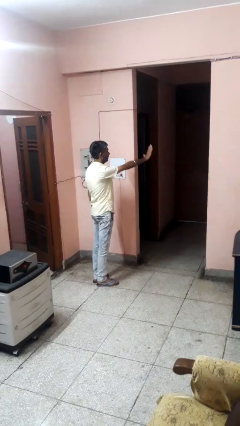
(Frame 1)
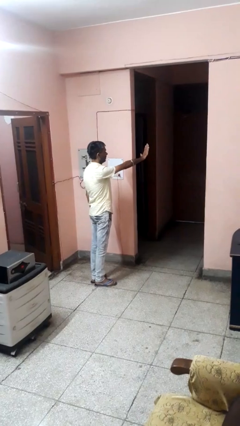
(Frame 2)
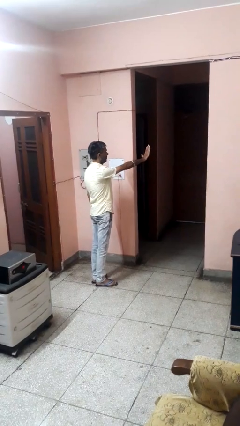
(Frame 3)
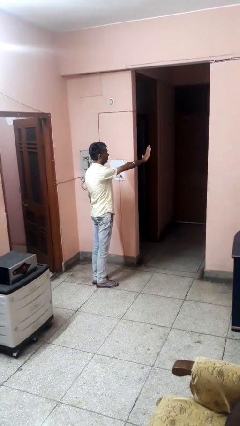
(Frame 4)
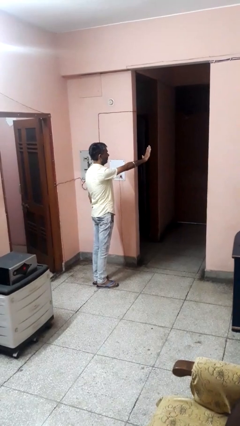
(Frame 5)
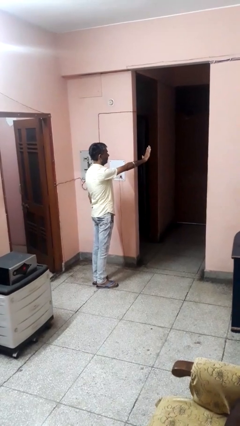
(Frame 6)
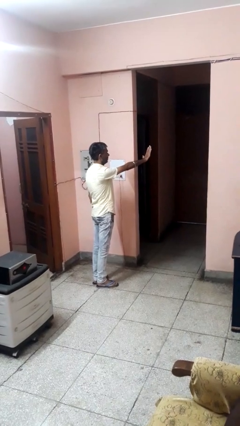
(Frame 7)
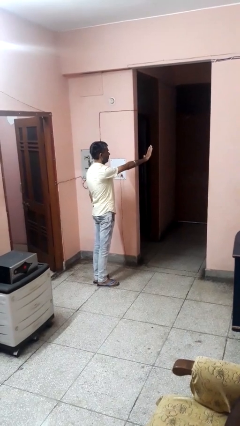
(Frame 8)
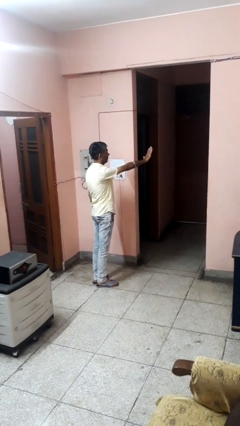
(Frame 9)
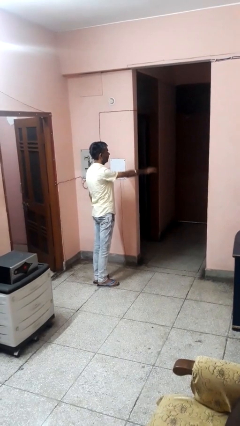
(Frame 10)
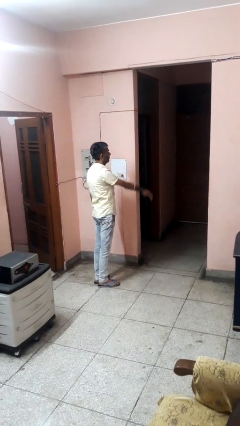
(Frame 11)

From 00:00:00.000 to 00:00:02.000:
person gestures stop

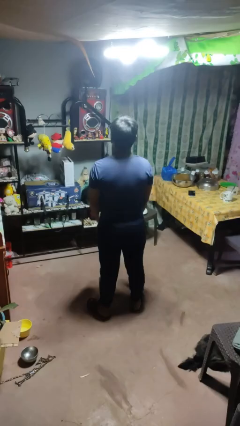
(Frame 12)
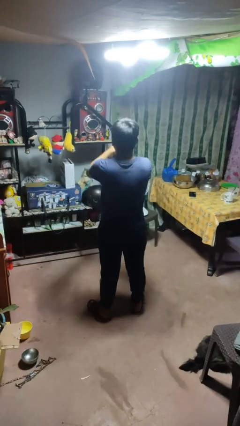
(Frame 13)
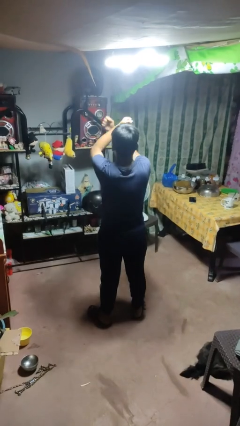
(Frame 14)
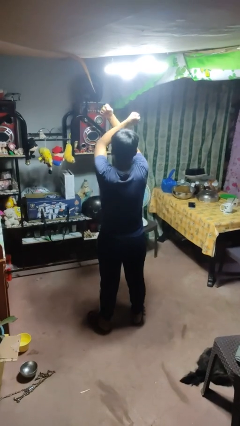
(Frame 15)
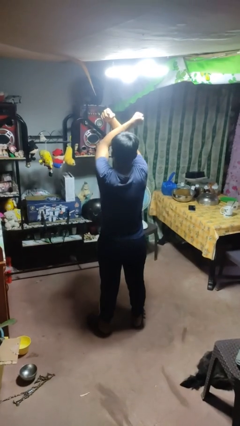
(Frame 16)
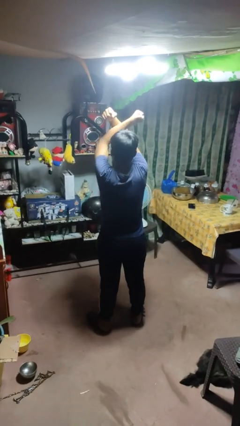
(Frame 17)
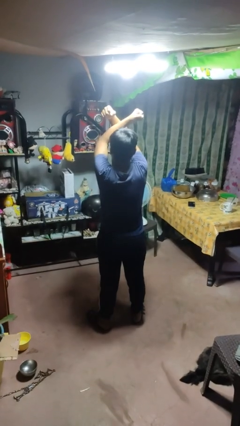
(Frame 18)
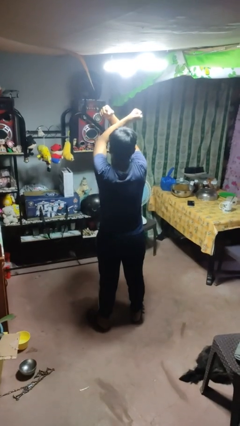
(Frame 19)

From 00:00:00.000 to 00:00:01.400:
person gestures arms x

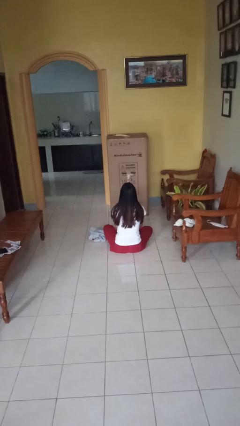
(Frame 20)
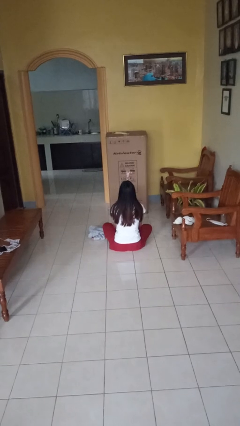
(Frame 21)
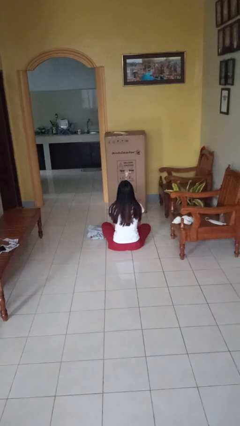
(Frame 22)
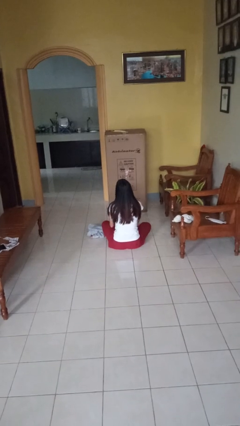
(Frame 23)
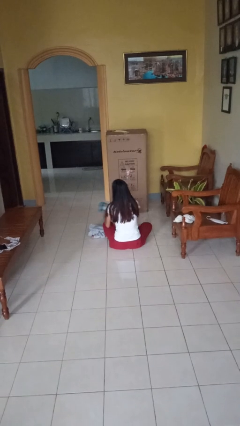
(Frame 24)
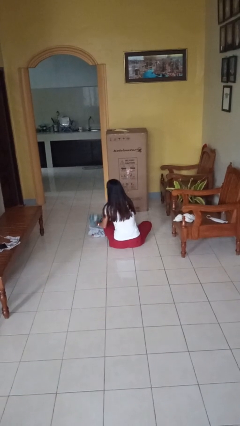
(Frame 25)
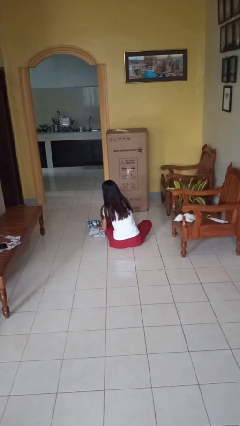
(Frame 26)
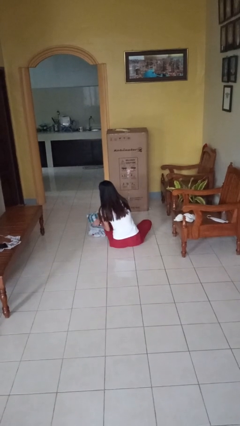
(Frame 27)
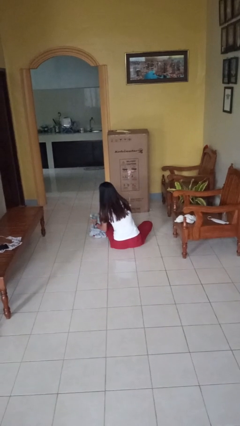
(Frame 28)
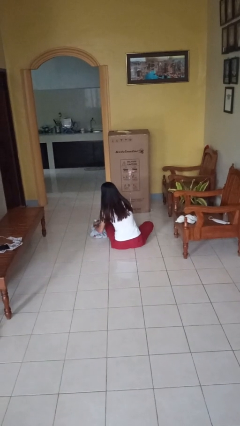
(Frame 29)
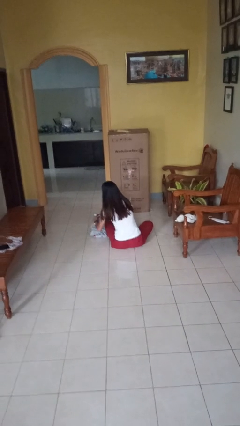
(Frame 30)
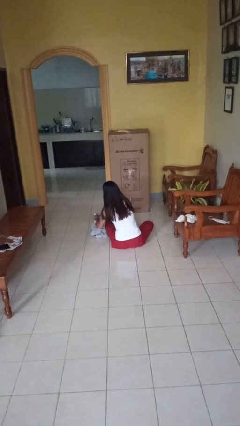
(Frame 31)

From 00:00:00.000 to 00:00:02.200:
person folds towel

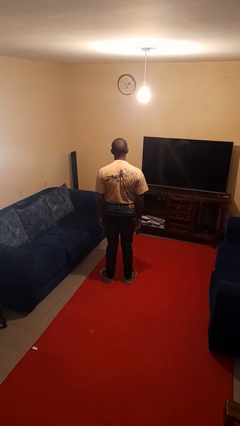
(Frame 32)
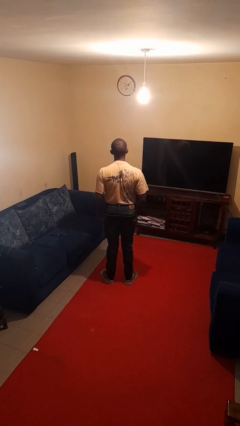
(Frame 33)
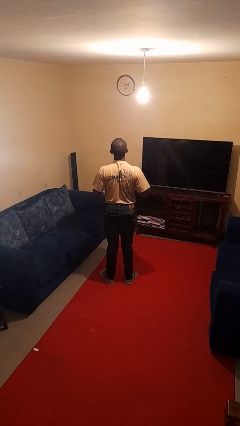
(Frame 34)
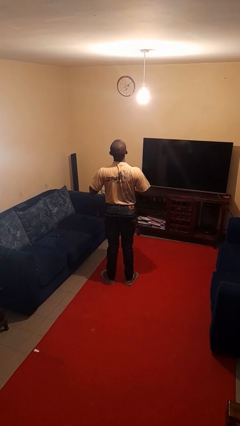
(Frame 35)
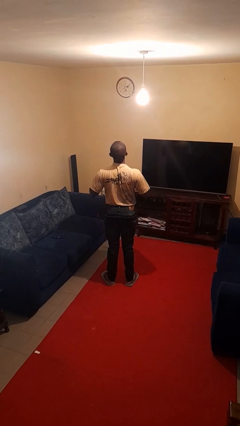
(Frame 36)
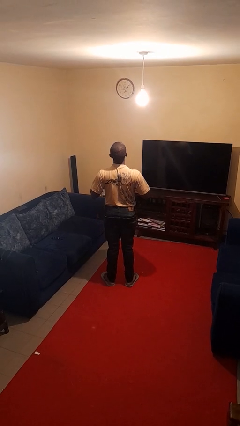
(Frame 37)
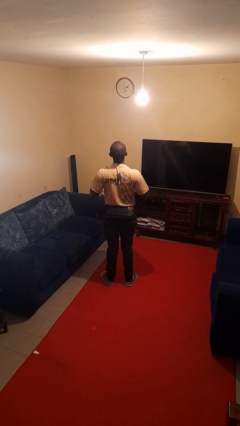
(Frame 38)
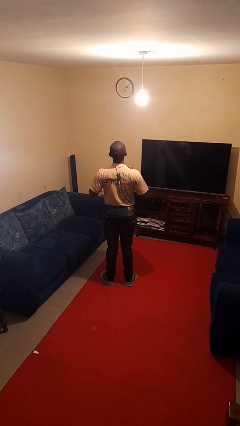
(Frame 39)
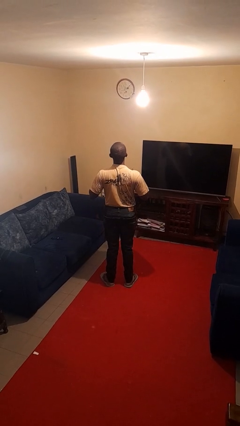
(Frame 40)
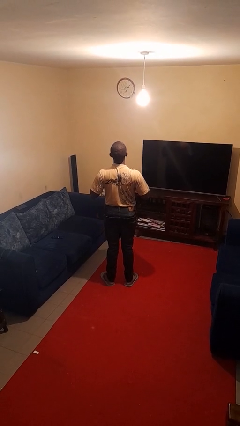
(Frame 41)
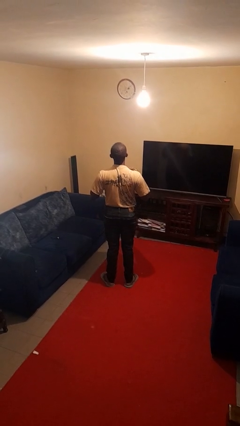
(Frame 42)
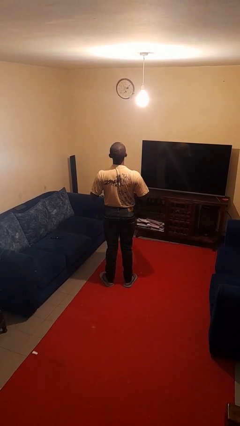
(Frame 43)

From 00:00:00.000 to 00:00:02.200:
person drums on chest

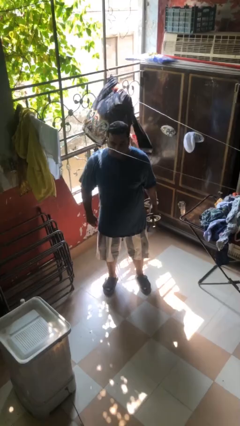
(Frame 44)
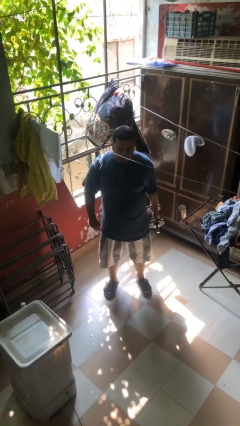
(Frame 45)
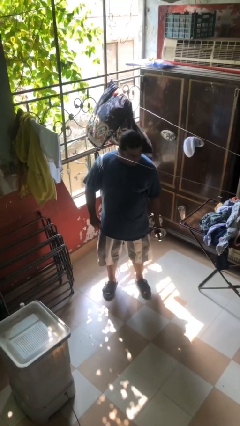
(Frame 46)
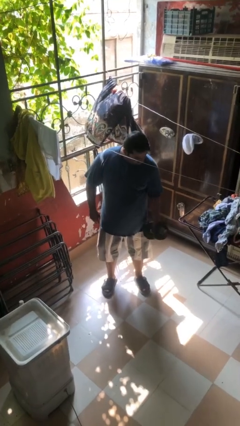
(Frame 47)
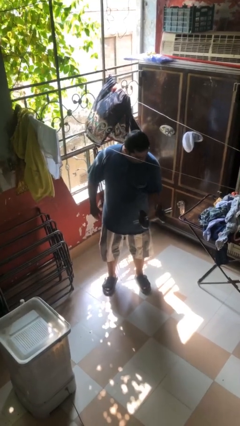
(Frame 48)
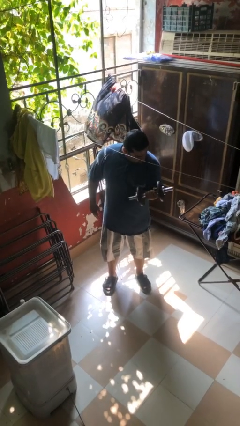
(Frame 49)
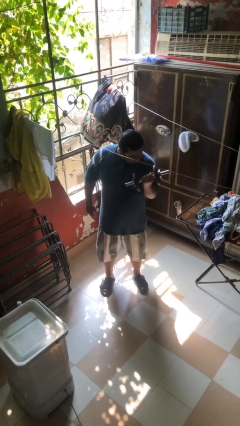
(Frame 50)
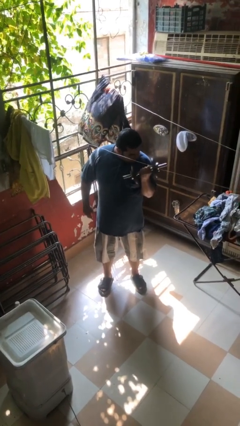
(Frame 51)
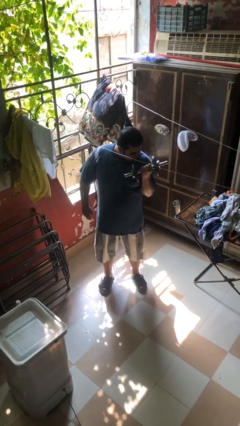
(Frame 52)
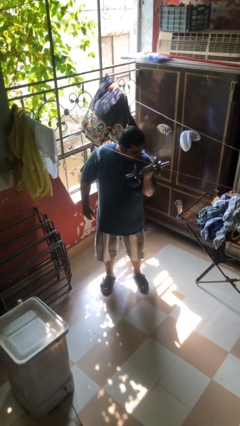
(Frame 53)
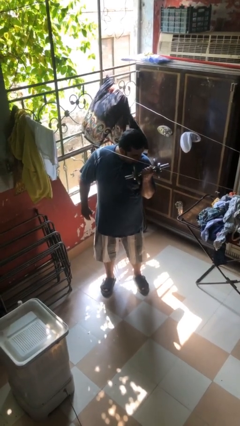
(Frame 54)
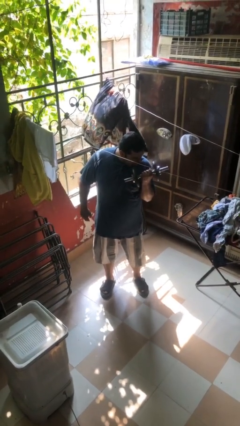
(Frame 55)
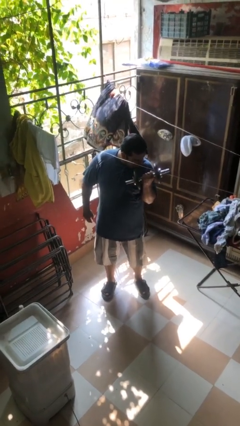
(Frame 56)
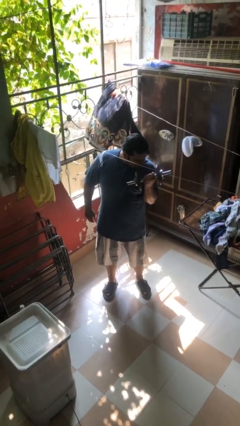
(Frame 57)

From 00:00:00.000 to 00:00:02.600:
person lifts dumbbells

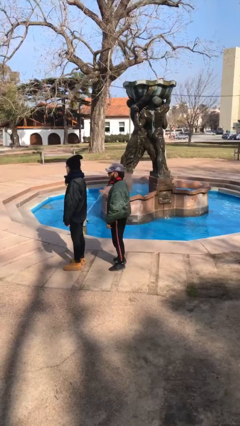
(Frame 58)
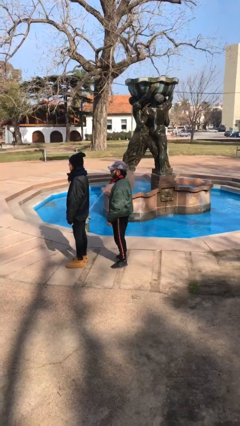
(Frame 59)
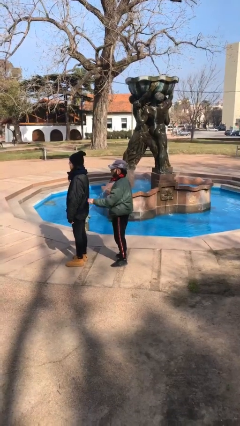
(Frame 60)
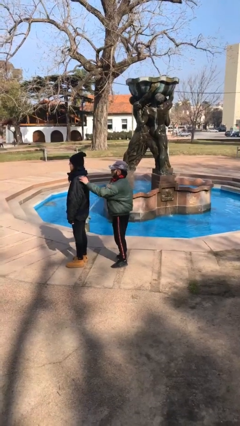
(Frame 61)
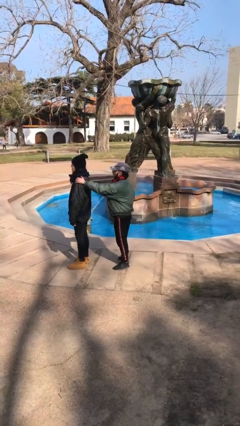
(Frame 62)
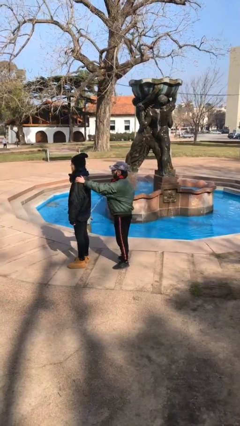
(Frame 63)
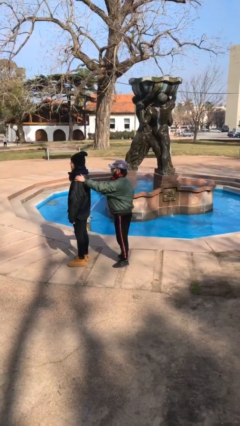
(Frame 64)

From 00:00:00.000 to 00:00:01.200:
person grabs person by shoulder

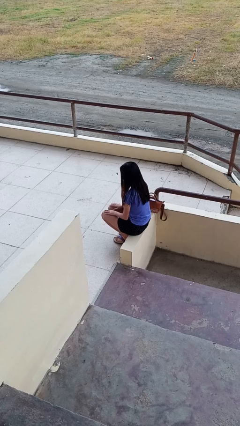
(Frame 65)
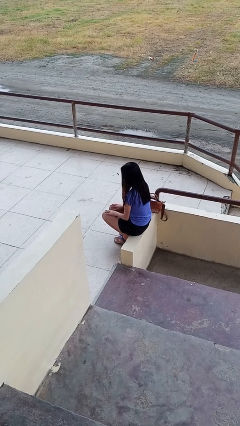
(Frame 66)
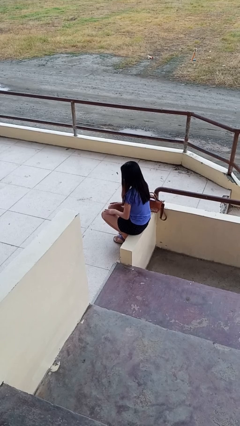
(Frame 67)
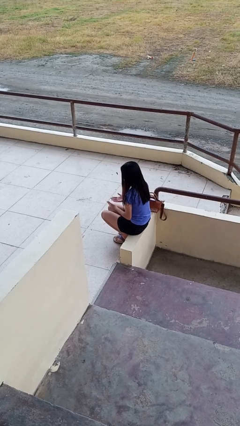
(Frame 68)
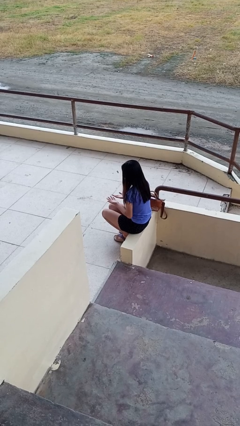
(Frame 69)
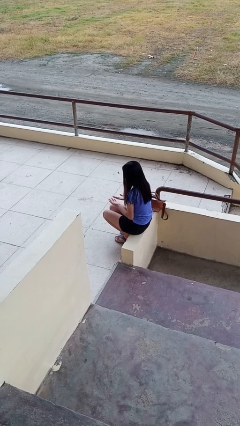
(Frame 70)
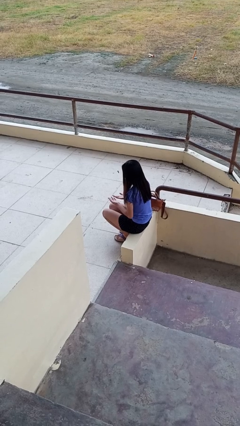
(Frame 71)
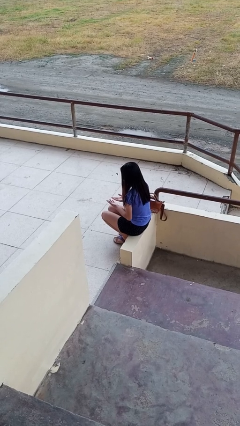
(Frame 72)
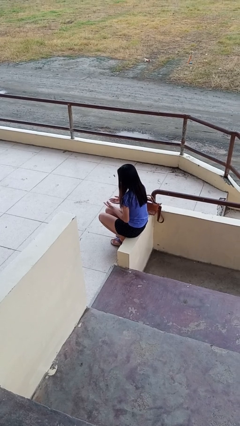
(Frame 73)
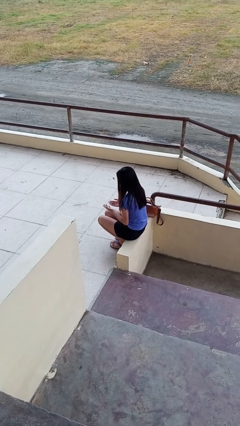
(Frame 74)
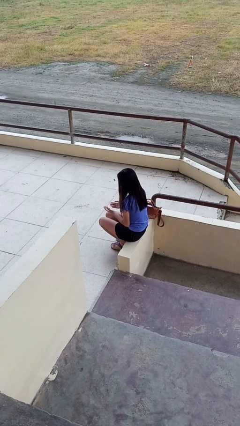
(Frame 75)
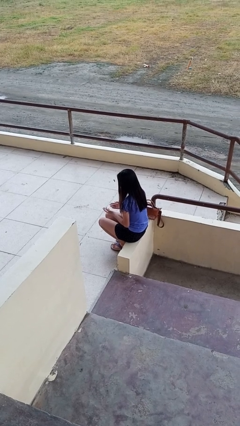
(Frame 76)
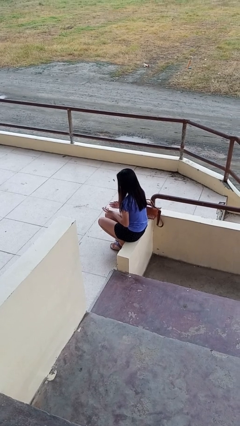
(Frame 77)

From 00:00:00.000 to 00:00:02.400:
person looks at hands in lap

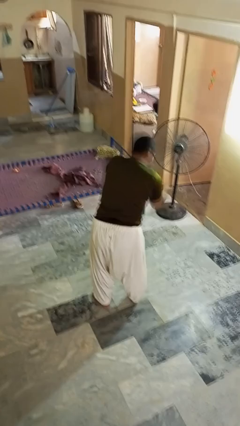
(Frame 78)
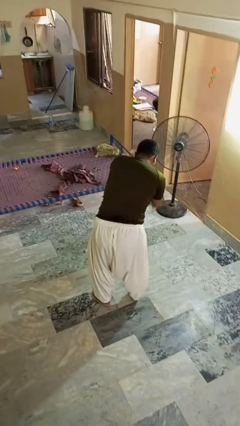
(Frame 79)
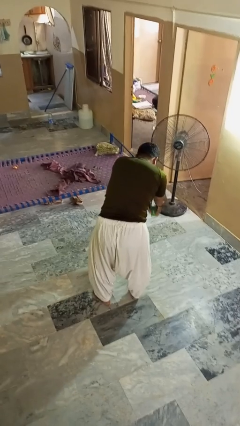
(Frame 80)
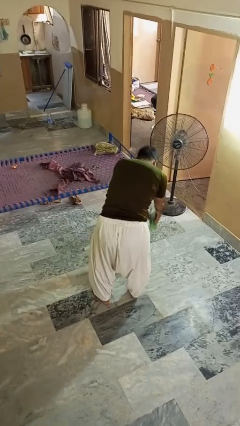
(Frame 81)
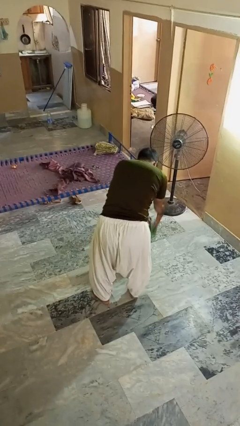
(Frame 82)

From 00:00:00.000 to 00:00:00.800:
person catches dropped object

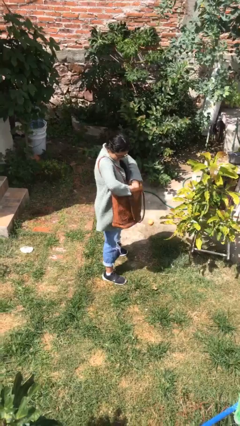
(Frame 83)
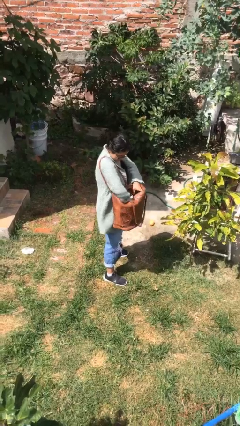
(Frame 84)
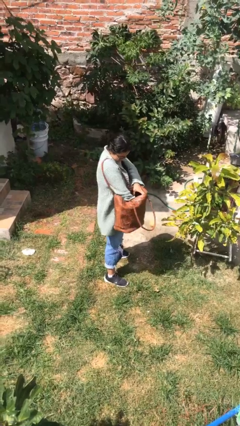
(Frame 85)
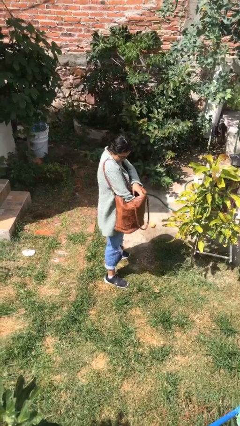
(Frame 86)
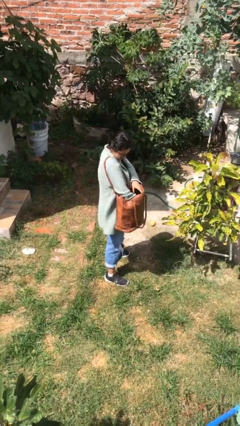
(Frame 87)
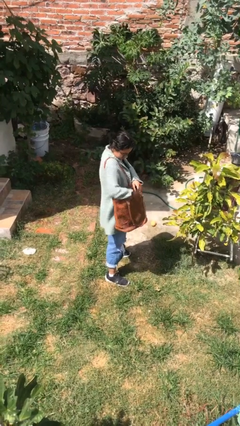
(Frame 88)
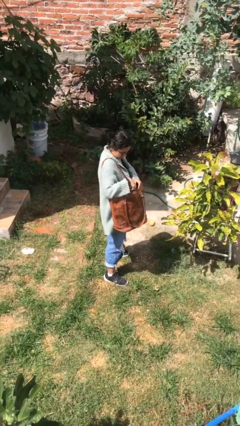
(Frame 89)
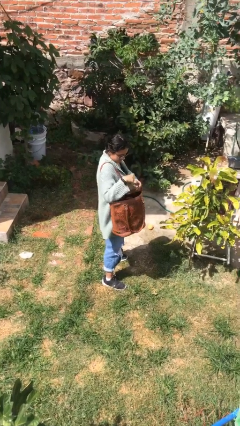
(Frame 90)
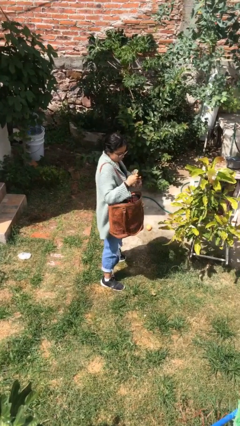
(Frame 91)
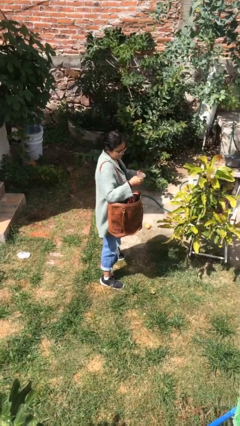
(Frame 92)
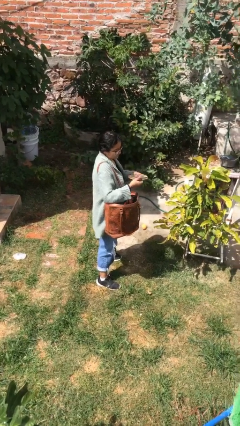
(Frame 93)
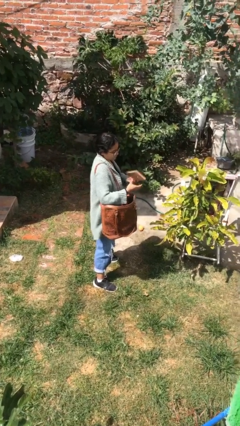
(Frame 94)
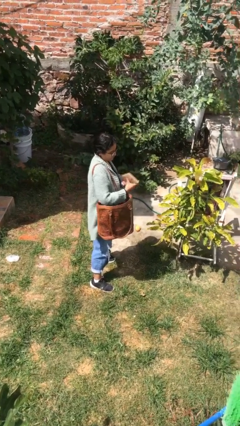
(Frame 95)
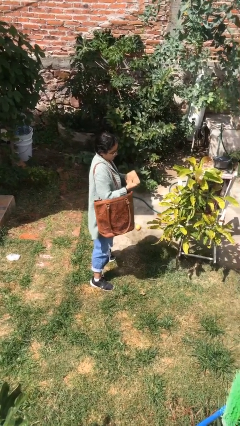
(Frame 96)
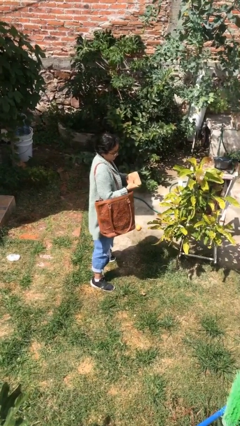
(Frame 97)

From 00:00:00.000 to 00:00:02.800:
person takes object from purse
